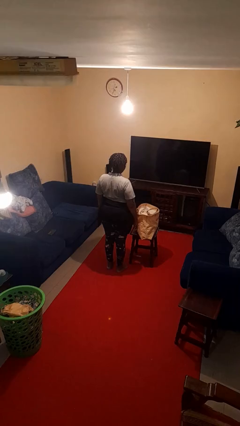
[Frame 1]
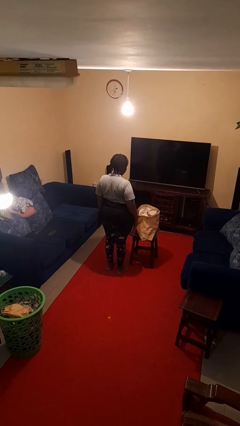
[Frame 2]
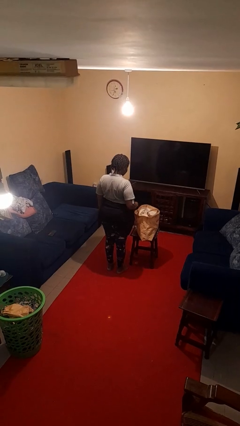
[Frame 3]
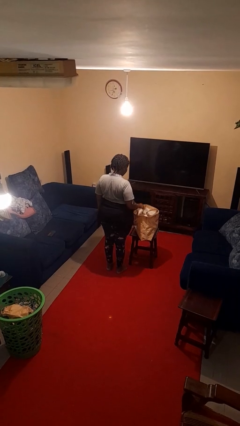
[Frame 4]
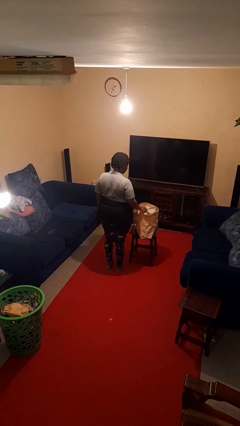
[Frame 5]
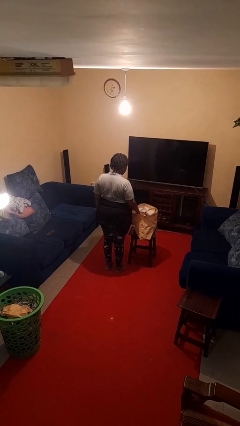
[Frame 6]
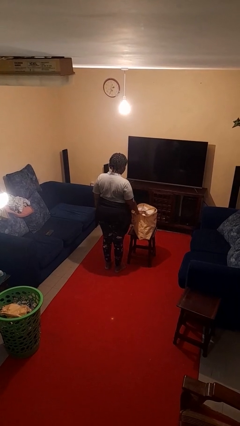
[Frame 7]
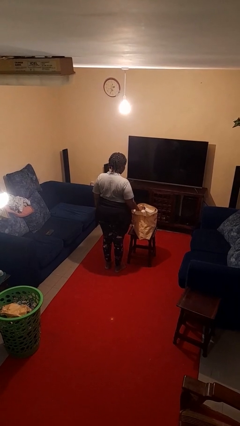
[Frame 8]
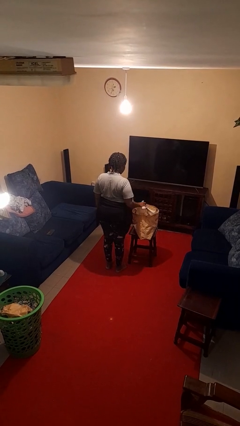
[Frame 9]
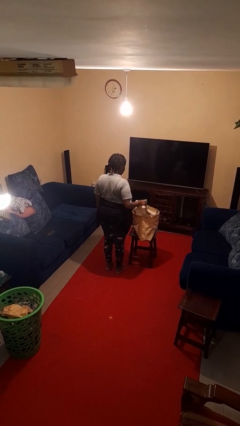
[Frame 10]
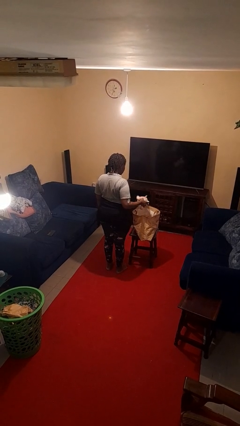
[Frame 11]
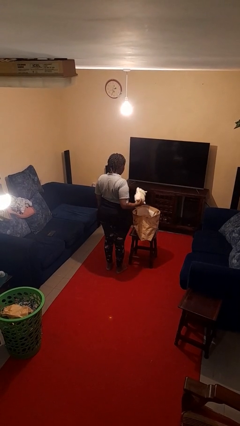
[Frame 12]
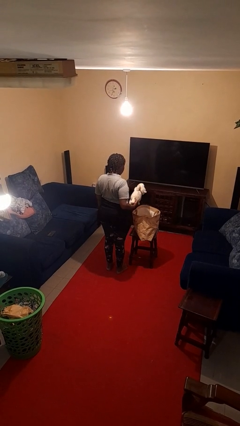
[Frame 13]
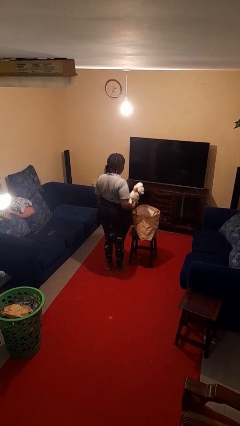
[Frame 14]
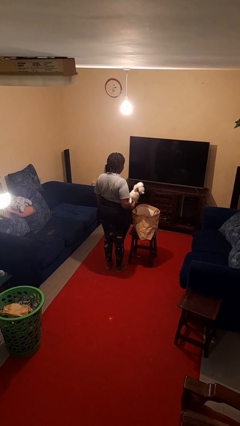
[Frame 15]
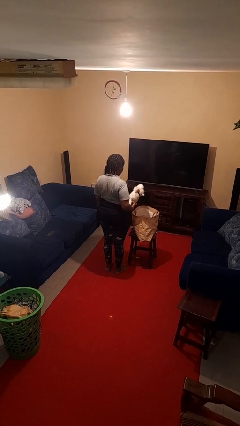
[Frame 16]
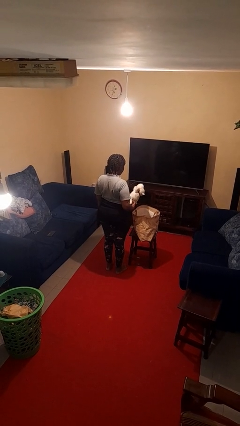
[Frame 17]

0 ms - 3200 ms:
person takes object from bag

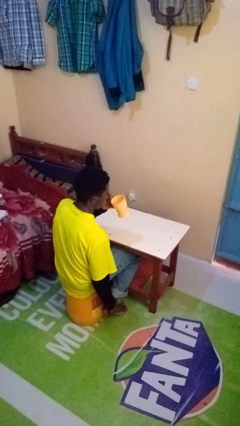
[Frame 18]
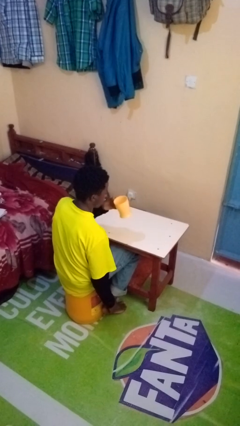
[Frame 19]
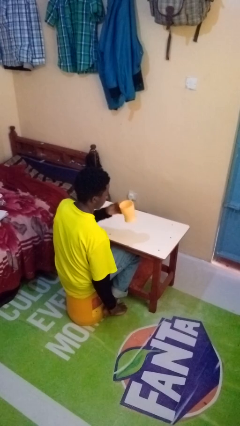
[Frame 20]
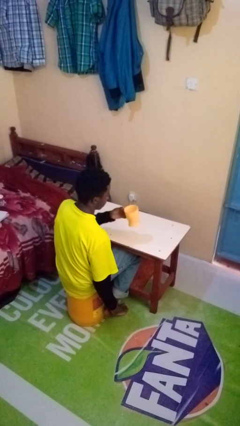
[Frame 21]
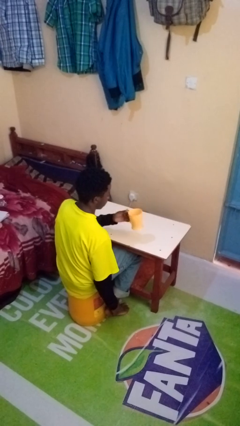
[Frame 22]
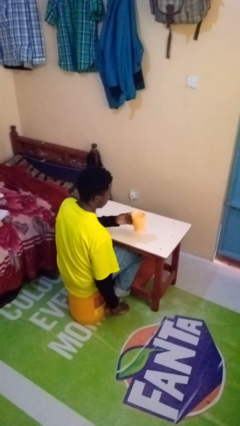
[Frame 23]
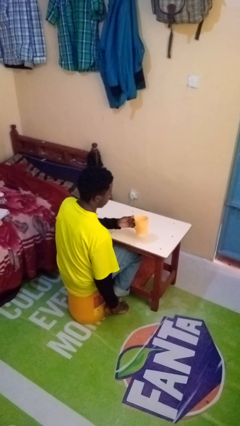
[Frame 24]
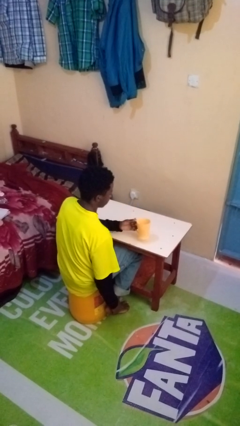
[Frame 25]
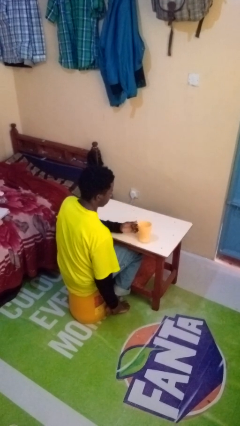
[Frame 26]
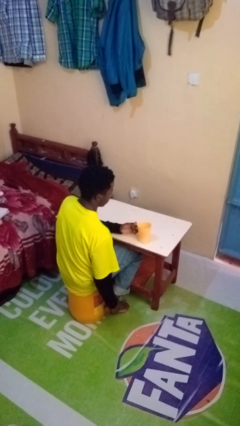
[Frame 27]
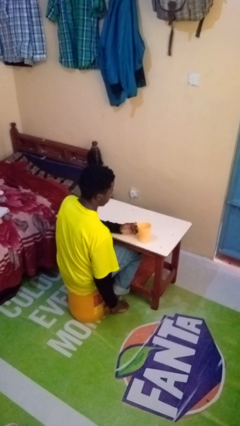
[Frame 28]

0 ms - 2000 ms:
person puts down object on table

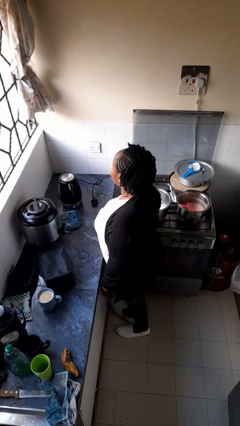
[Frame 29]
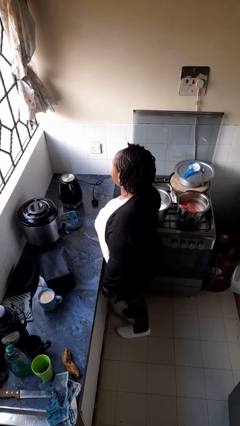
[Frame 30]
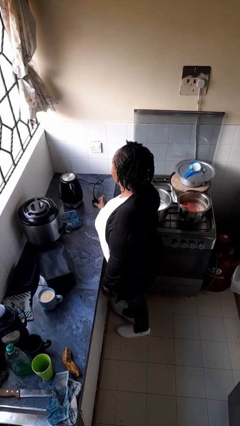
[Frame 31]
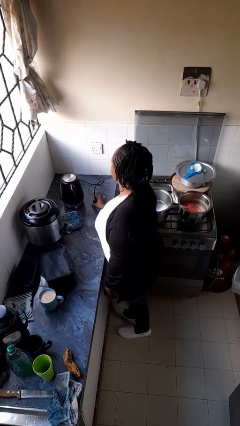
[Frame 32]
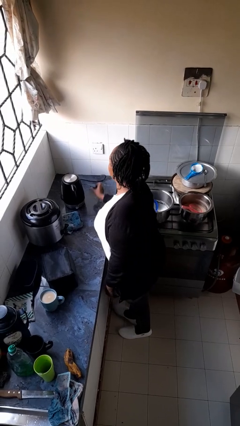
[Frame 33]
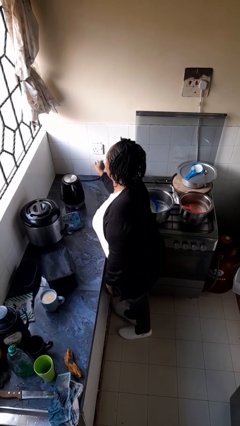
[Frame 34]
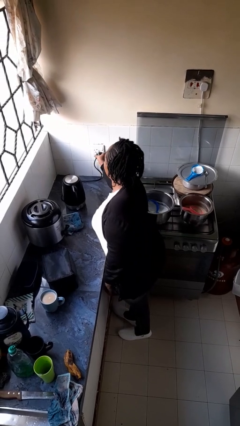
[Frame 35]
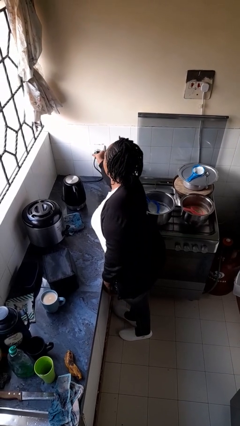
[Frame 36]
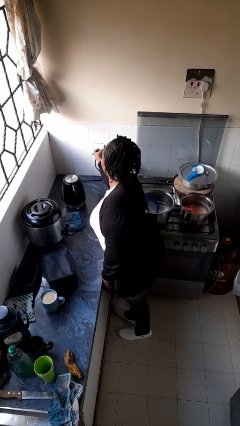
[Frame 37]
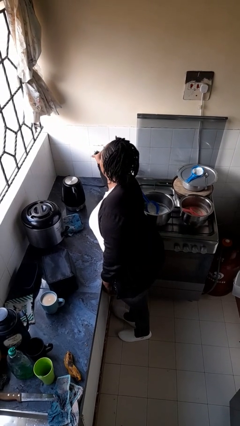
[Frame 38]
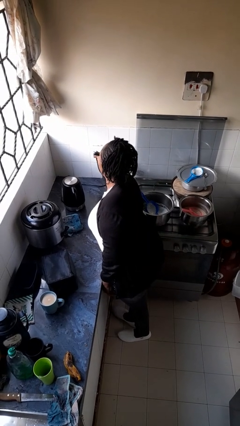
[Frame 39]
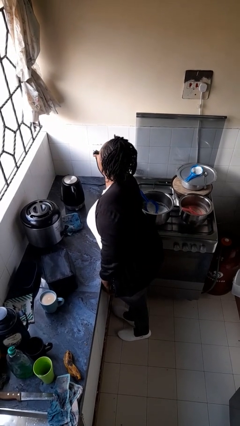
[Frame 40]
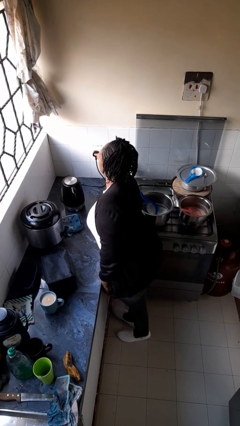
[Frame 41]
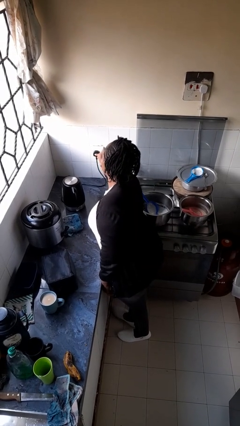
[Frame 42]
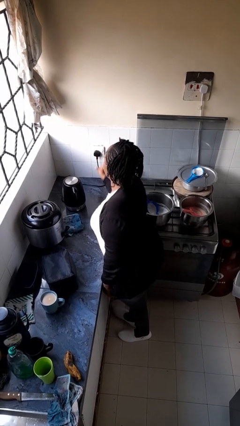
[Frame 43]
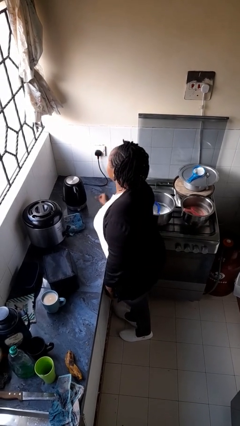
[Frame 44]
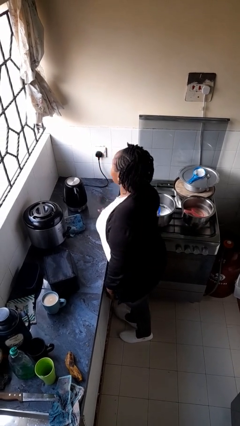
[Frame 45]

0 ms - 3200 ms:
person plugs into electrical socket

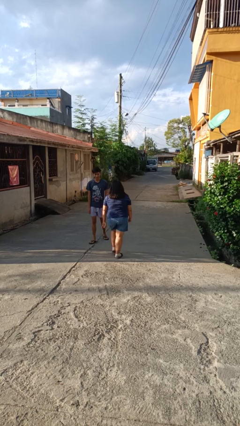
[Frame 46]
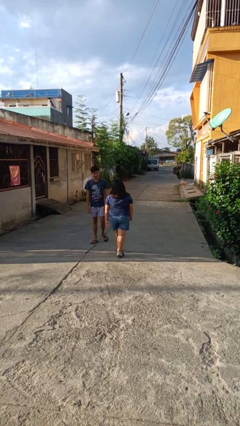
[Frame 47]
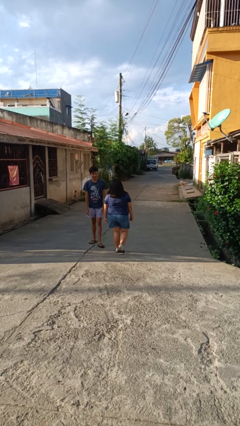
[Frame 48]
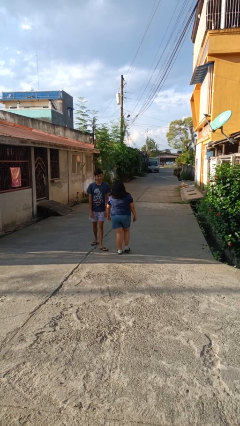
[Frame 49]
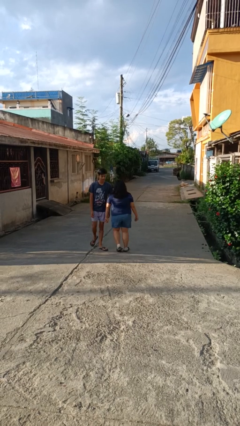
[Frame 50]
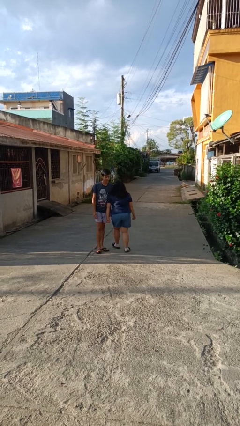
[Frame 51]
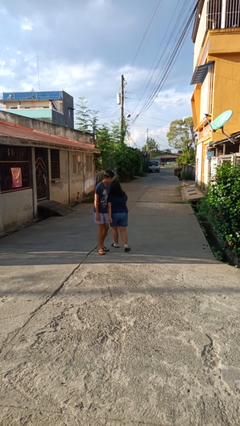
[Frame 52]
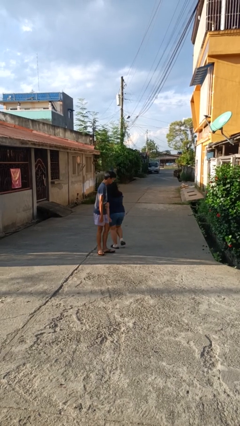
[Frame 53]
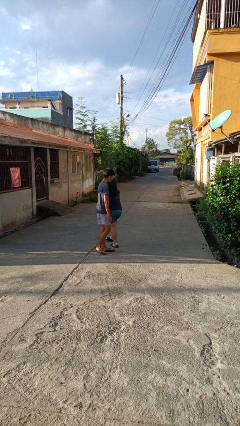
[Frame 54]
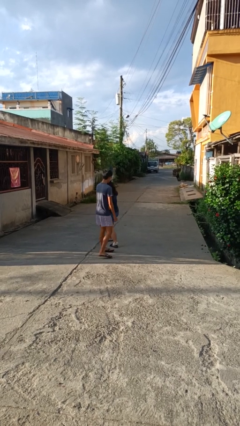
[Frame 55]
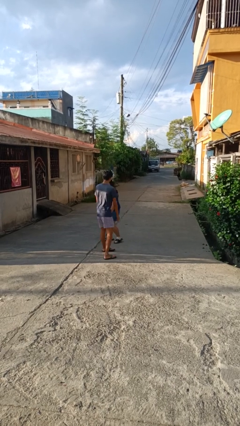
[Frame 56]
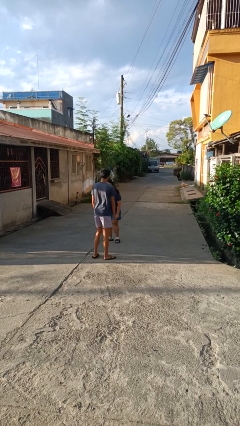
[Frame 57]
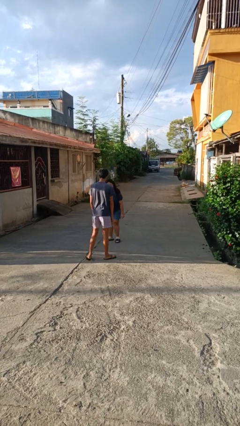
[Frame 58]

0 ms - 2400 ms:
person bumps into person

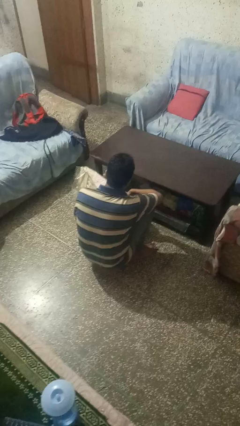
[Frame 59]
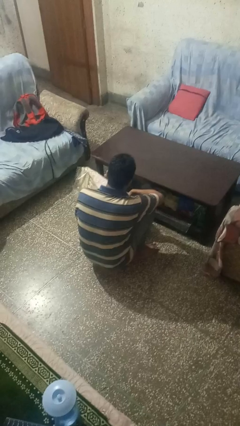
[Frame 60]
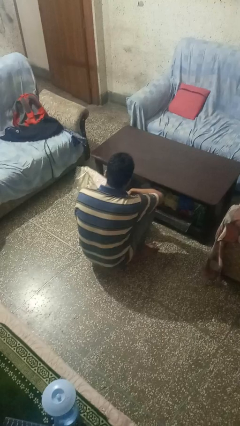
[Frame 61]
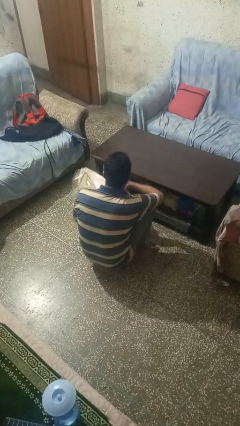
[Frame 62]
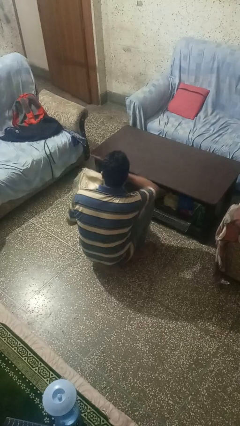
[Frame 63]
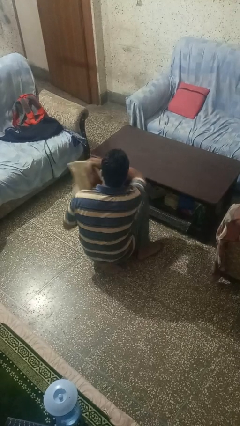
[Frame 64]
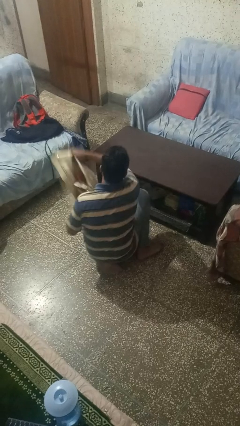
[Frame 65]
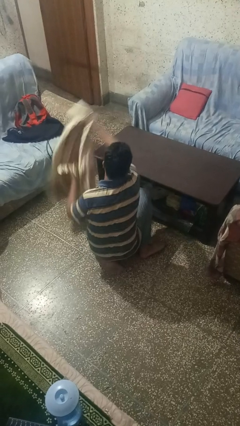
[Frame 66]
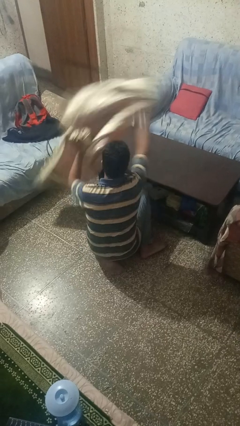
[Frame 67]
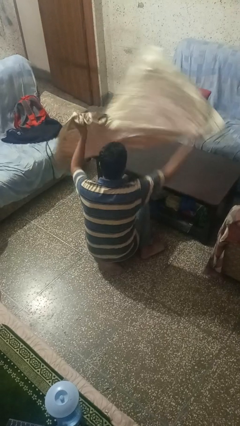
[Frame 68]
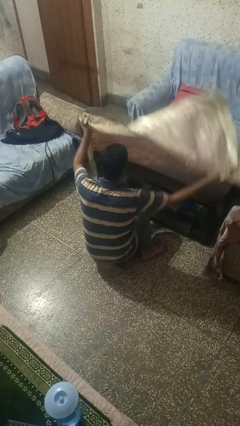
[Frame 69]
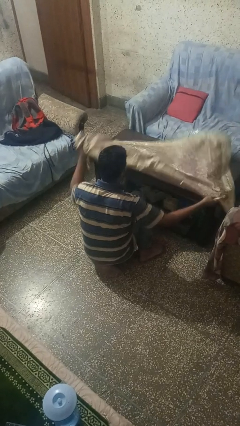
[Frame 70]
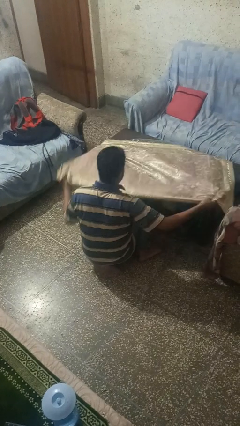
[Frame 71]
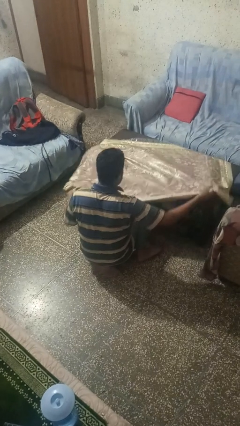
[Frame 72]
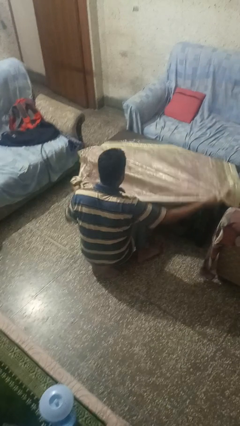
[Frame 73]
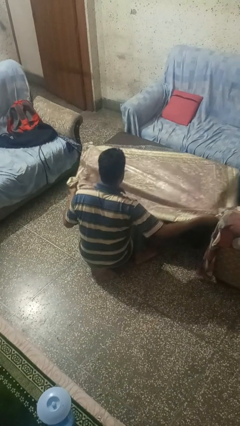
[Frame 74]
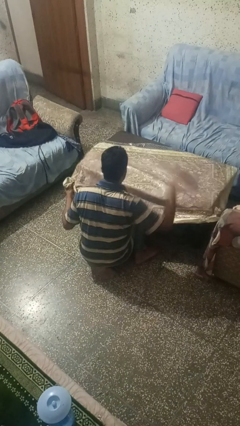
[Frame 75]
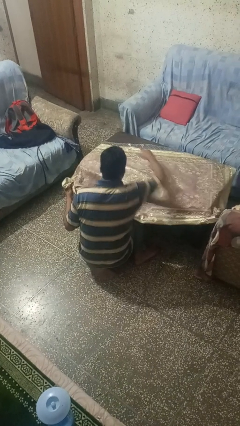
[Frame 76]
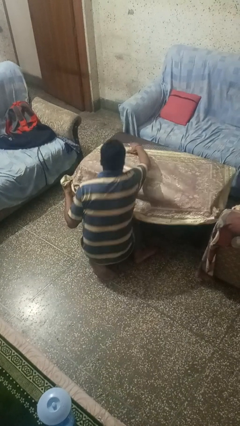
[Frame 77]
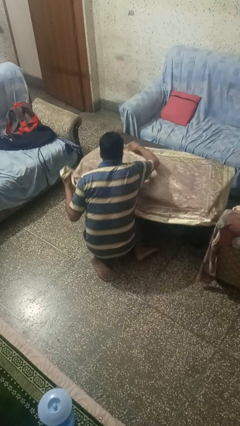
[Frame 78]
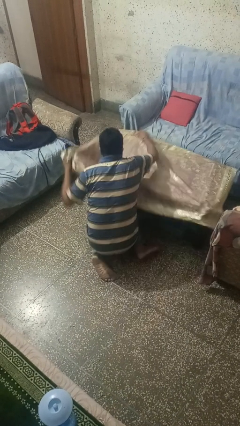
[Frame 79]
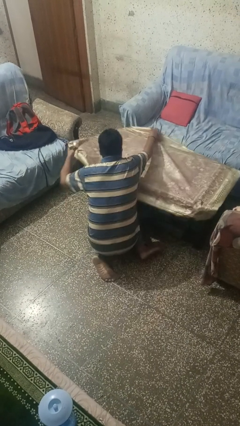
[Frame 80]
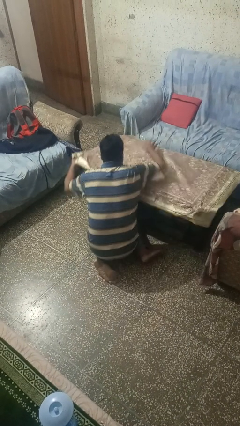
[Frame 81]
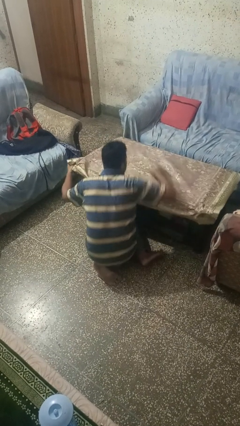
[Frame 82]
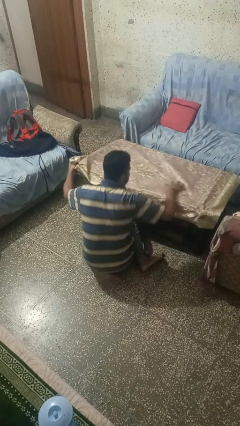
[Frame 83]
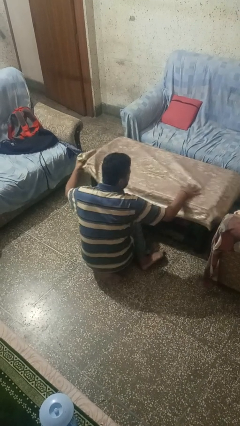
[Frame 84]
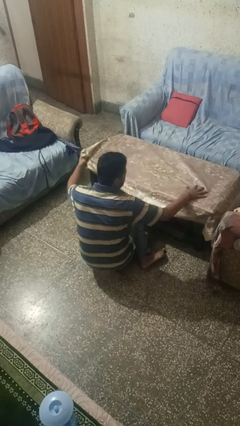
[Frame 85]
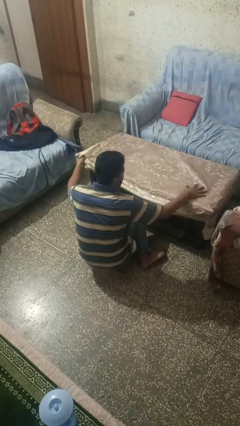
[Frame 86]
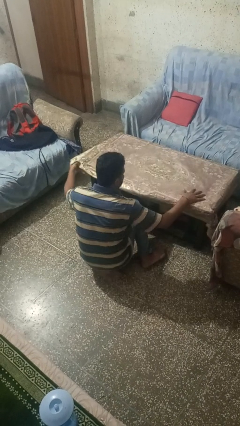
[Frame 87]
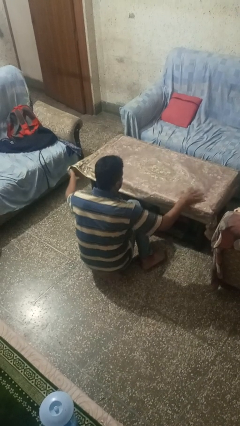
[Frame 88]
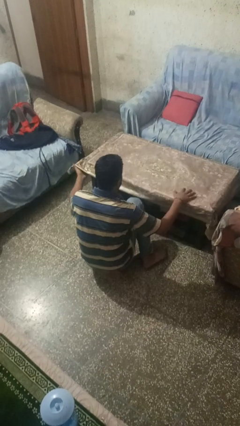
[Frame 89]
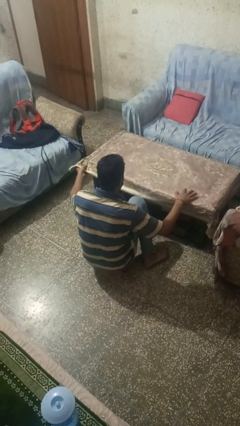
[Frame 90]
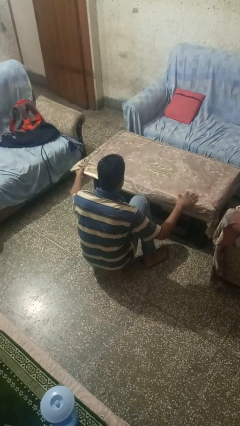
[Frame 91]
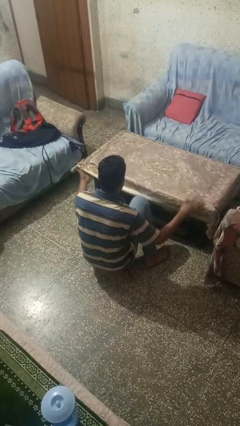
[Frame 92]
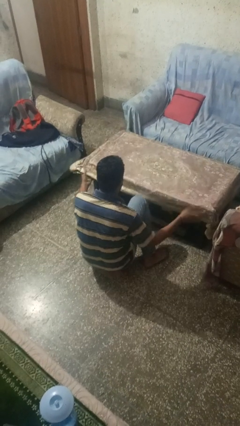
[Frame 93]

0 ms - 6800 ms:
person spreads tablecloth
